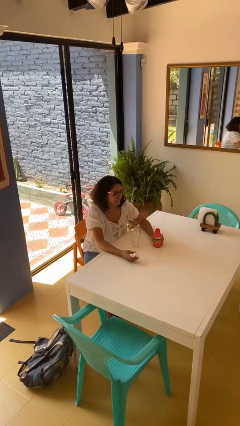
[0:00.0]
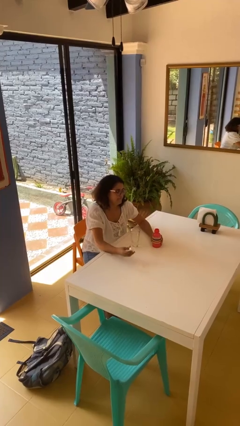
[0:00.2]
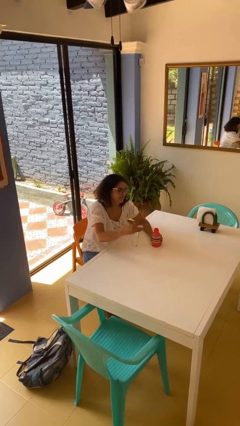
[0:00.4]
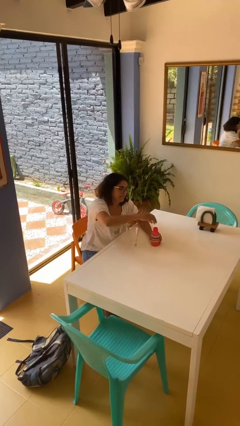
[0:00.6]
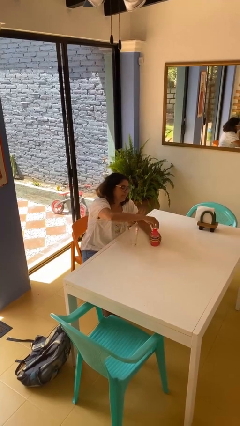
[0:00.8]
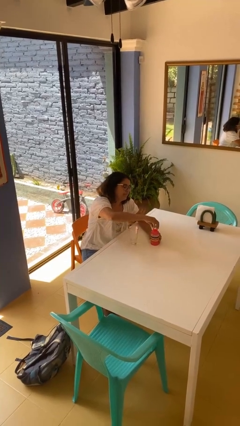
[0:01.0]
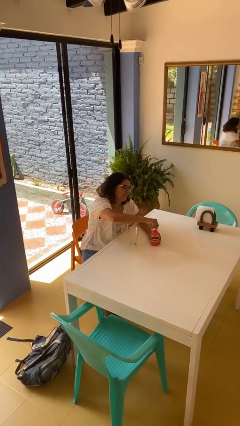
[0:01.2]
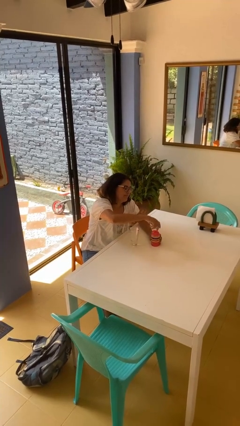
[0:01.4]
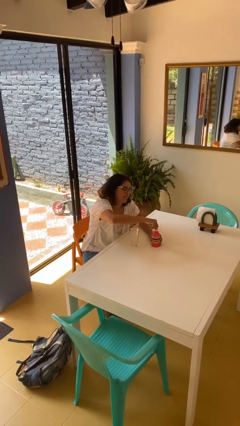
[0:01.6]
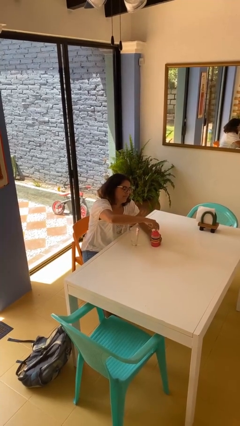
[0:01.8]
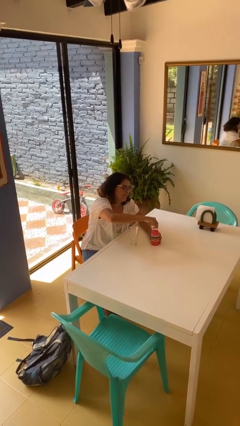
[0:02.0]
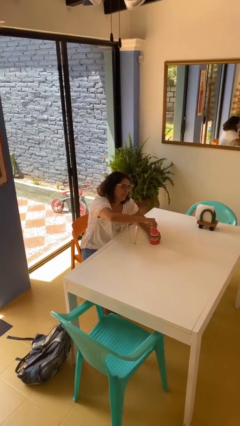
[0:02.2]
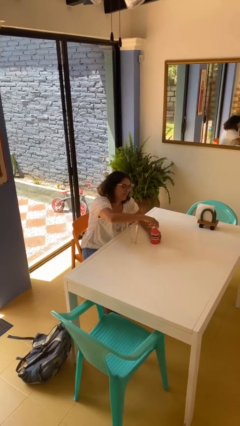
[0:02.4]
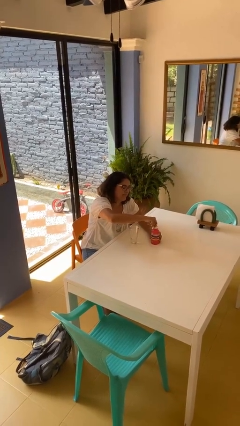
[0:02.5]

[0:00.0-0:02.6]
person screws lid to bottle

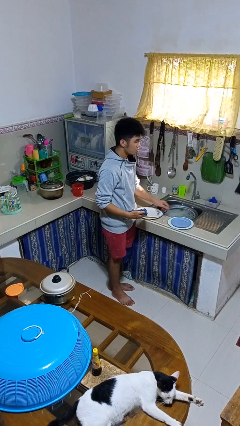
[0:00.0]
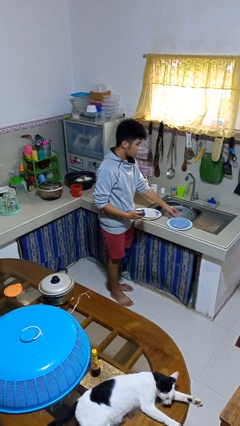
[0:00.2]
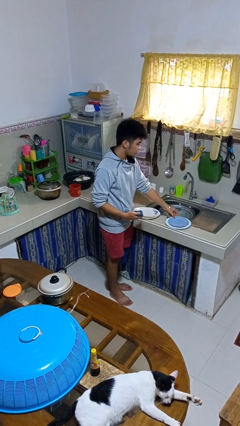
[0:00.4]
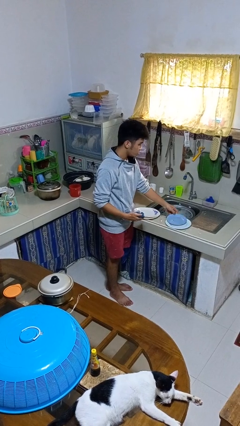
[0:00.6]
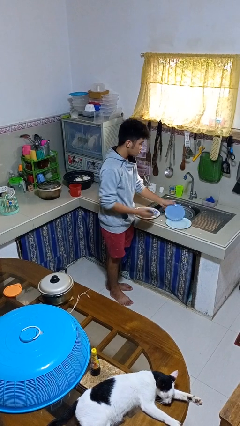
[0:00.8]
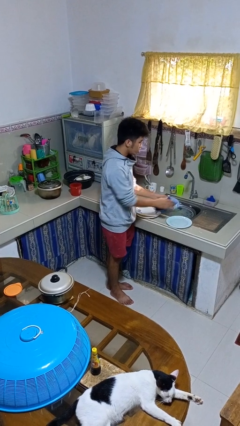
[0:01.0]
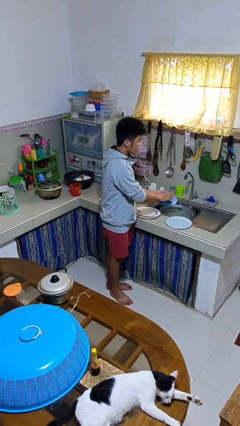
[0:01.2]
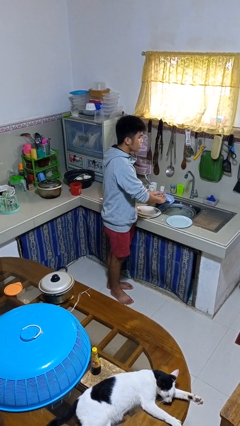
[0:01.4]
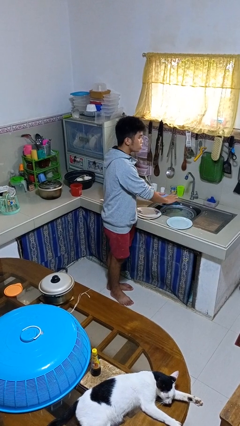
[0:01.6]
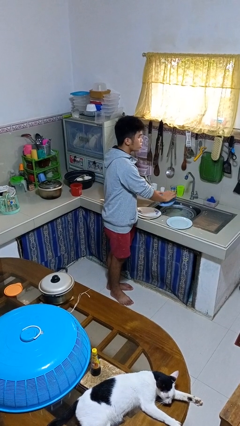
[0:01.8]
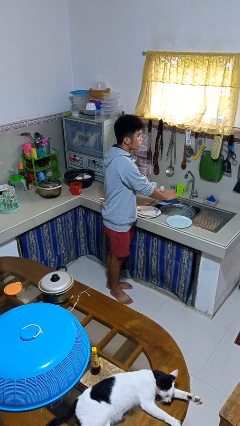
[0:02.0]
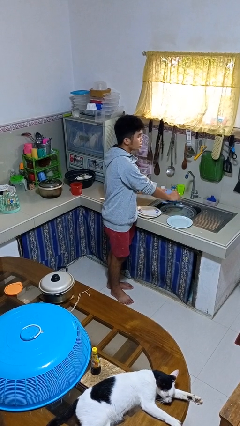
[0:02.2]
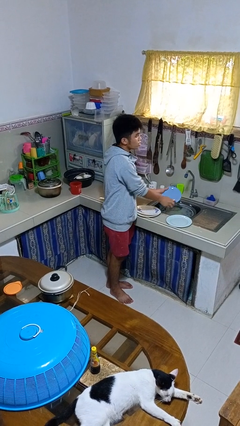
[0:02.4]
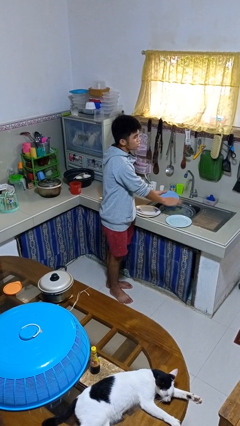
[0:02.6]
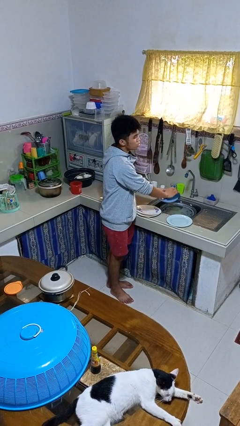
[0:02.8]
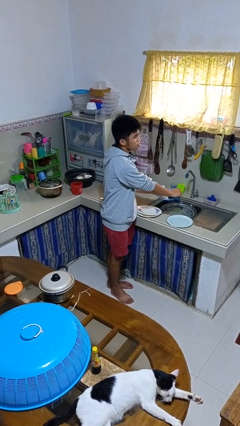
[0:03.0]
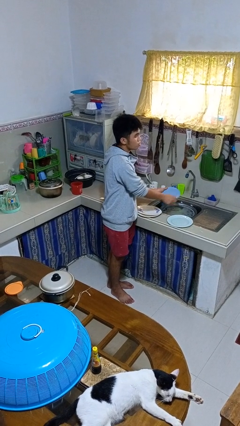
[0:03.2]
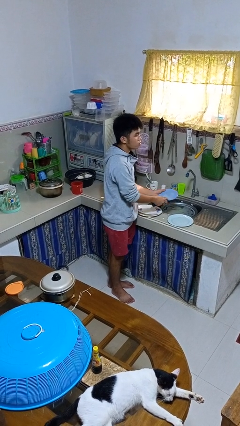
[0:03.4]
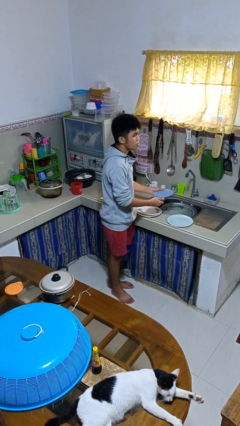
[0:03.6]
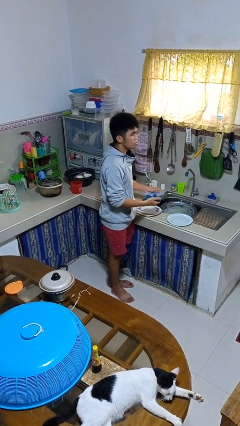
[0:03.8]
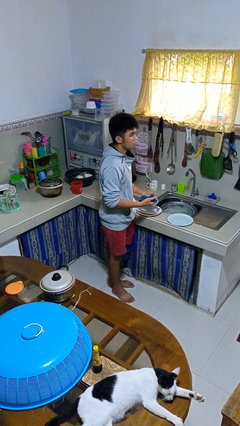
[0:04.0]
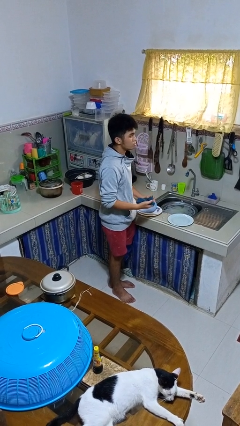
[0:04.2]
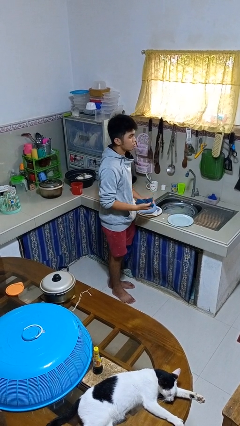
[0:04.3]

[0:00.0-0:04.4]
person dries dish

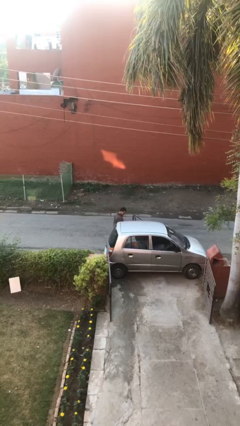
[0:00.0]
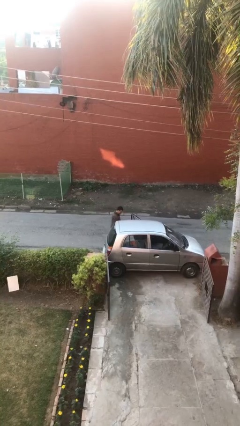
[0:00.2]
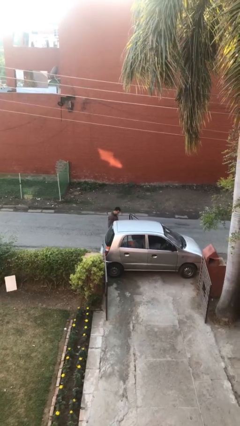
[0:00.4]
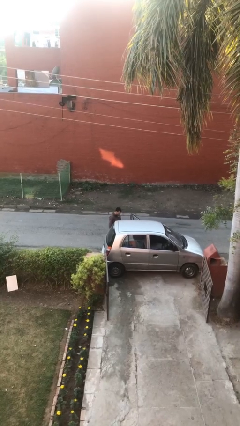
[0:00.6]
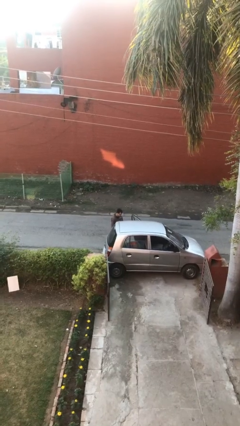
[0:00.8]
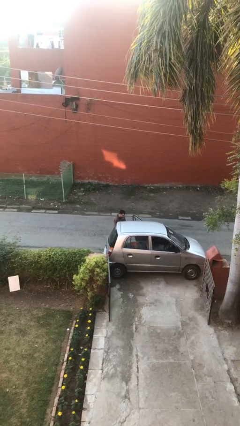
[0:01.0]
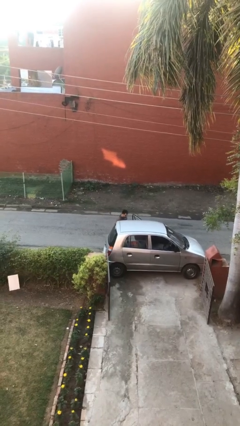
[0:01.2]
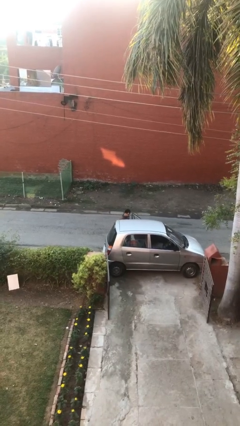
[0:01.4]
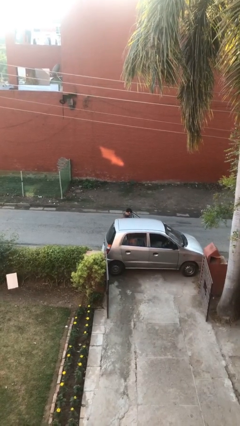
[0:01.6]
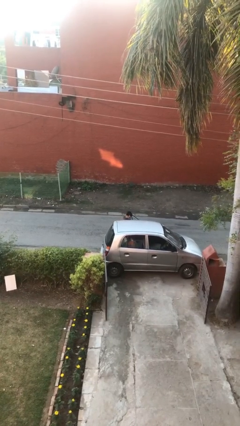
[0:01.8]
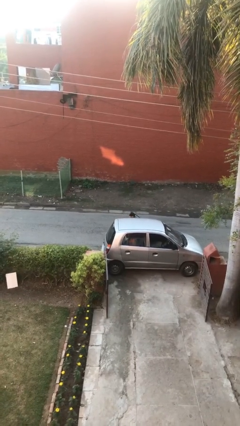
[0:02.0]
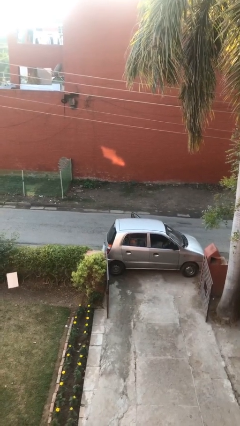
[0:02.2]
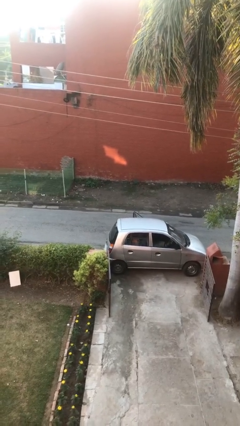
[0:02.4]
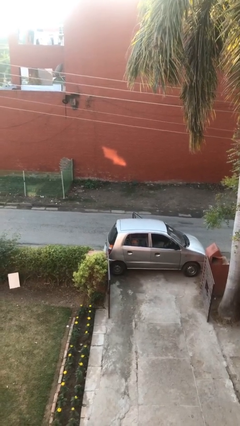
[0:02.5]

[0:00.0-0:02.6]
person enters car

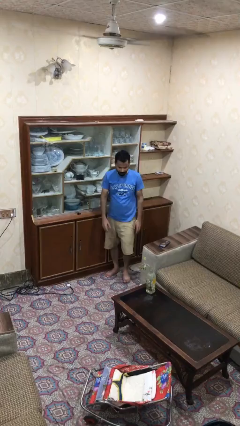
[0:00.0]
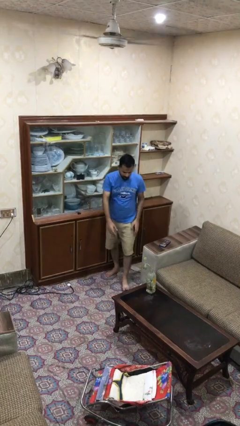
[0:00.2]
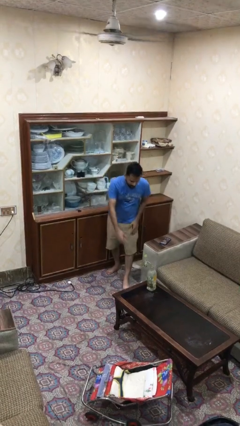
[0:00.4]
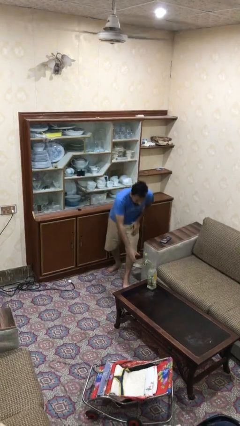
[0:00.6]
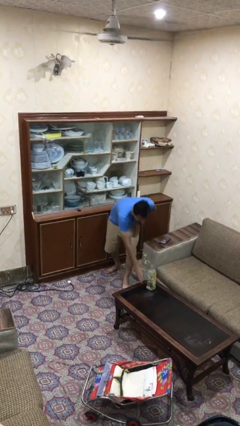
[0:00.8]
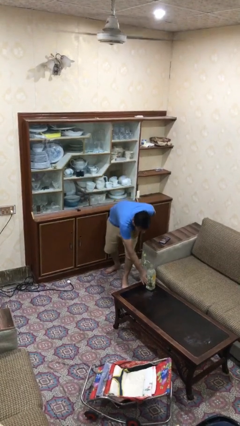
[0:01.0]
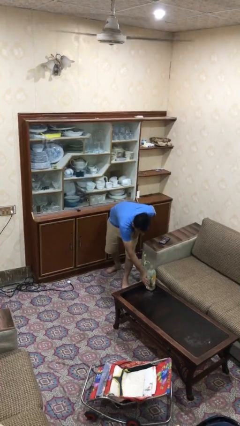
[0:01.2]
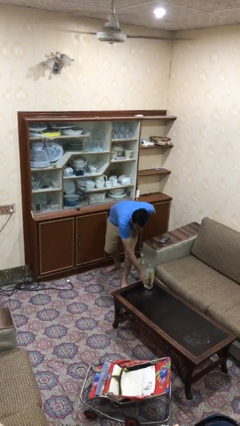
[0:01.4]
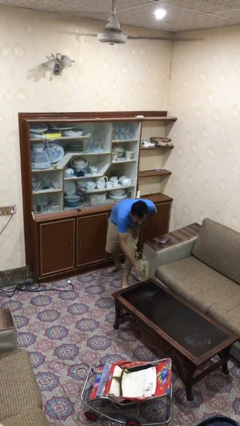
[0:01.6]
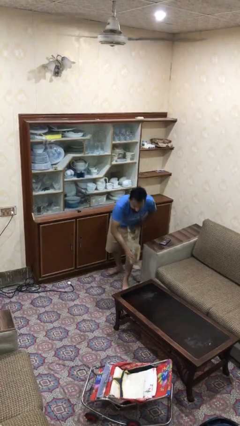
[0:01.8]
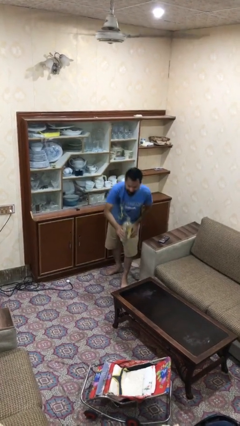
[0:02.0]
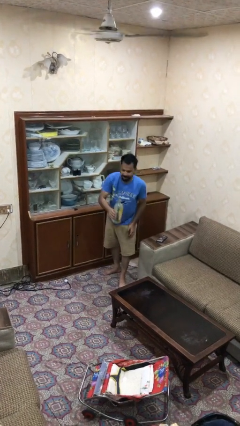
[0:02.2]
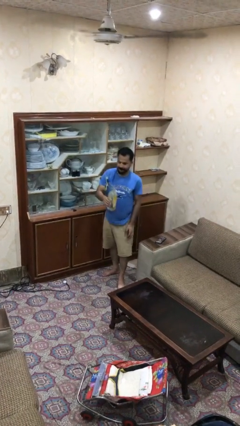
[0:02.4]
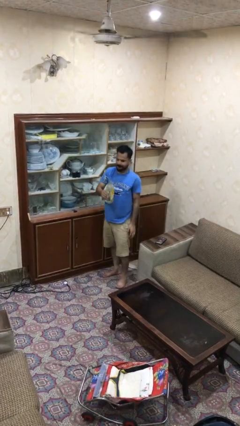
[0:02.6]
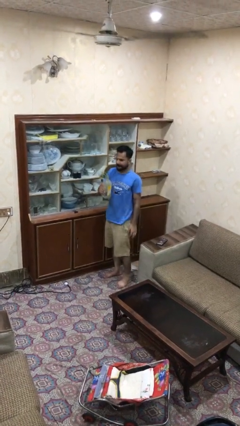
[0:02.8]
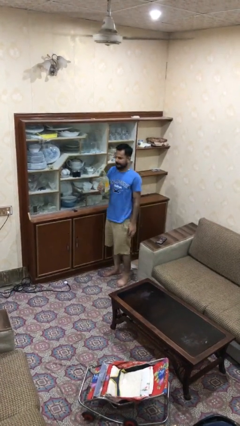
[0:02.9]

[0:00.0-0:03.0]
person picks up object from table

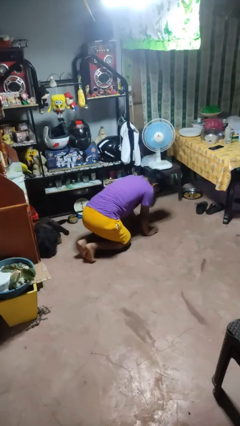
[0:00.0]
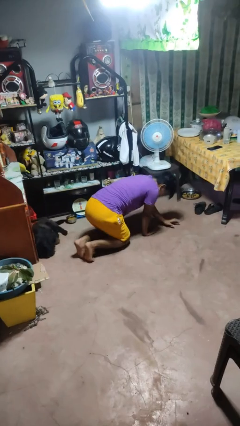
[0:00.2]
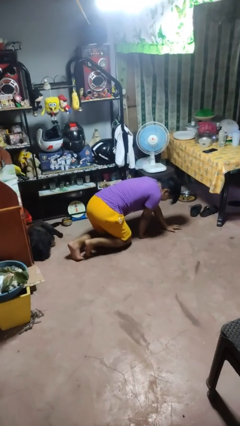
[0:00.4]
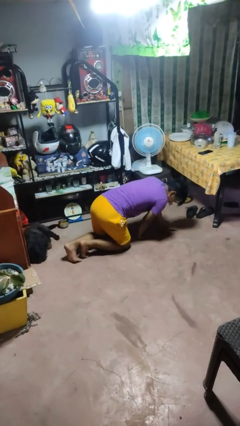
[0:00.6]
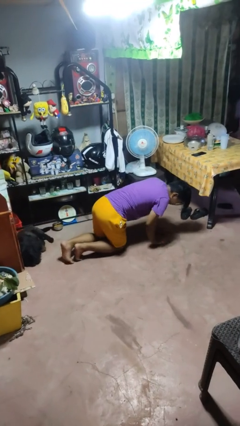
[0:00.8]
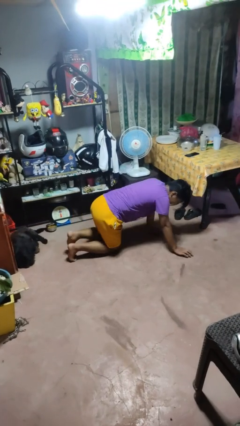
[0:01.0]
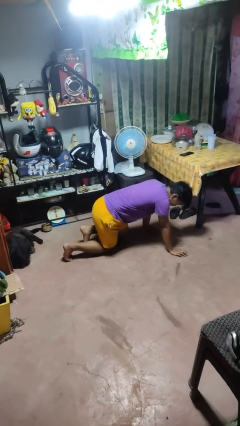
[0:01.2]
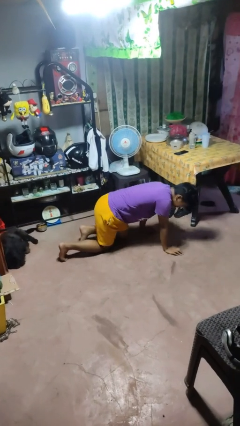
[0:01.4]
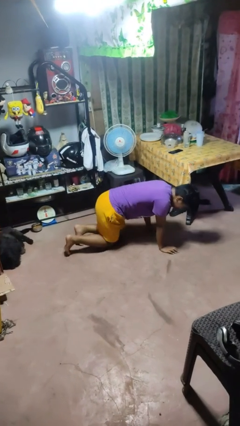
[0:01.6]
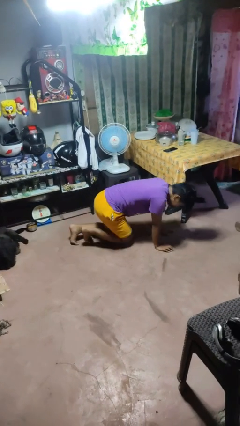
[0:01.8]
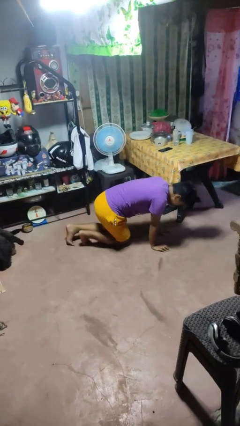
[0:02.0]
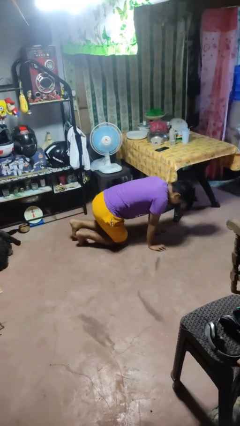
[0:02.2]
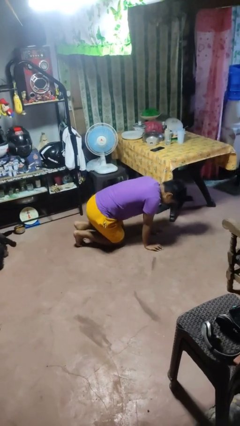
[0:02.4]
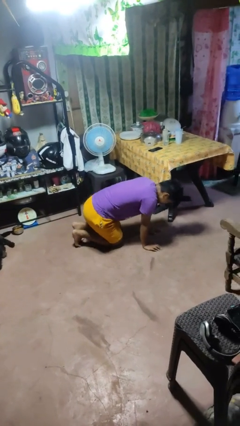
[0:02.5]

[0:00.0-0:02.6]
person crawls

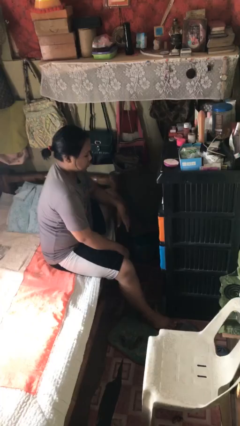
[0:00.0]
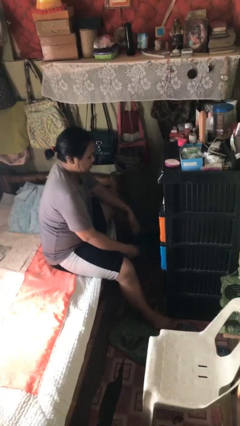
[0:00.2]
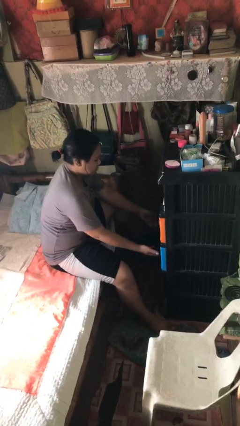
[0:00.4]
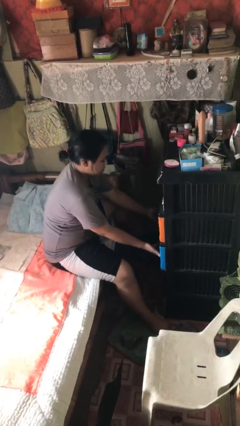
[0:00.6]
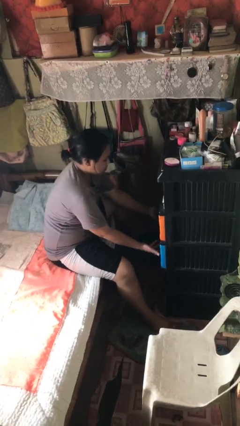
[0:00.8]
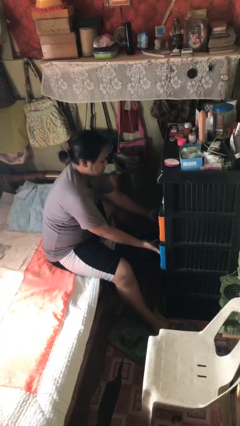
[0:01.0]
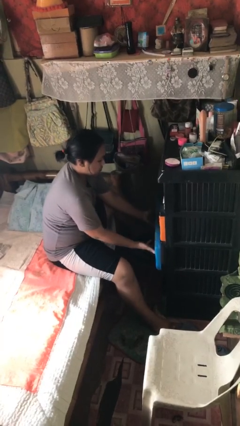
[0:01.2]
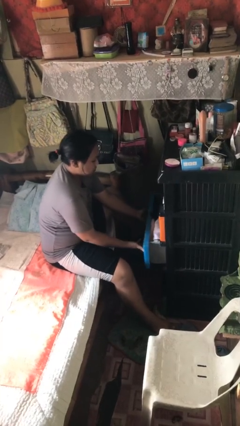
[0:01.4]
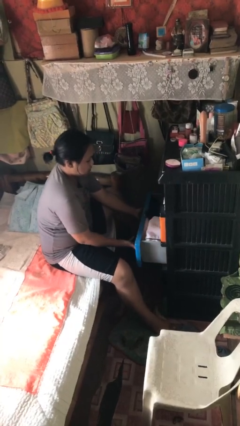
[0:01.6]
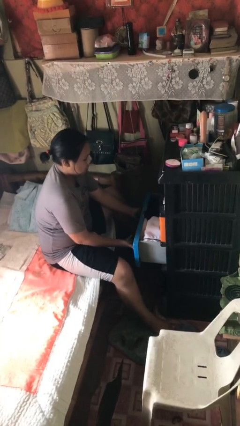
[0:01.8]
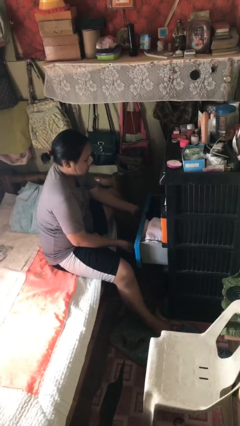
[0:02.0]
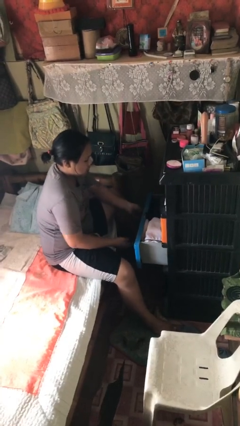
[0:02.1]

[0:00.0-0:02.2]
person opens dresser drawer

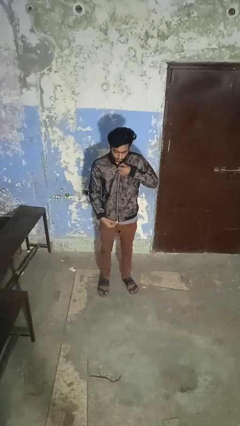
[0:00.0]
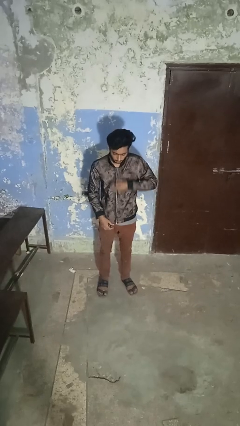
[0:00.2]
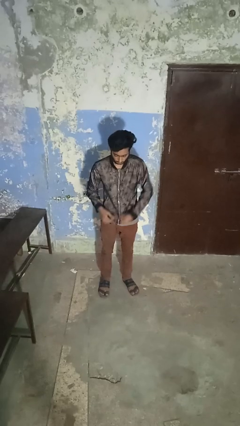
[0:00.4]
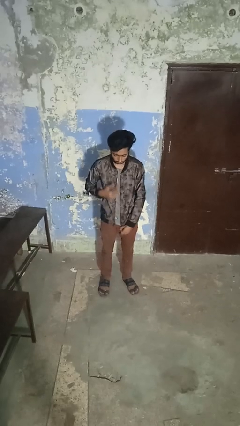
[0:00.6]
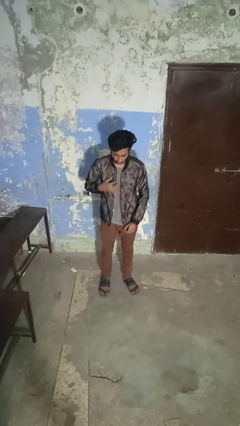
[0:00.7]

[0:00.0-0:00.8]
person unzips jacket
